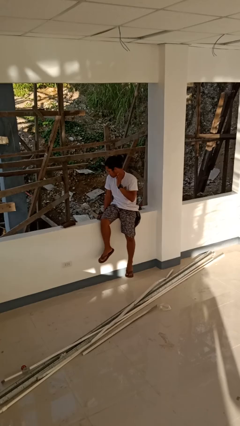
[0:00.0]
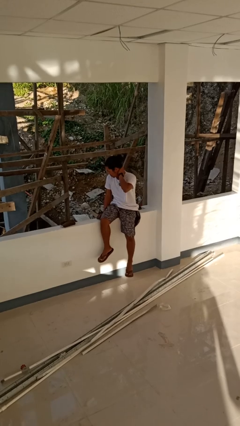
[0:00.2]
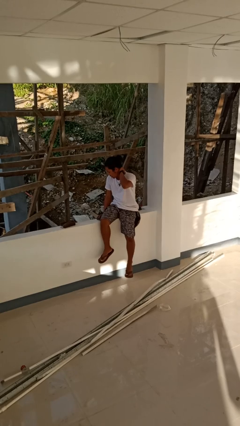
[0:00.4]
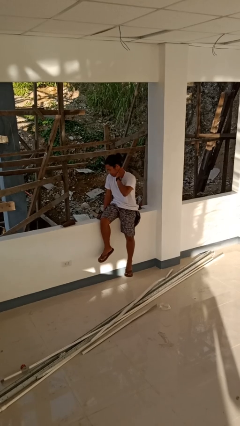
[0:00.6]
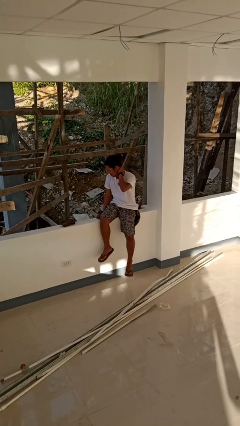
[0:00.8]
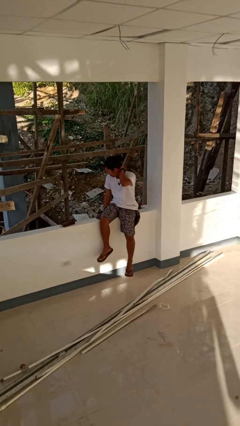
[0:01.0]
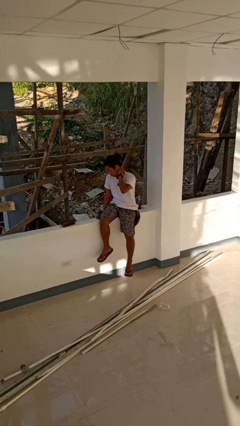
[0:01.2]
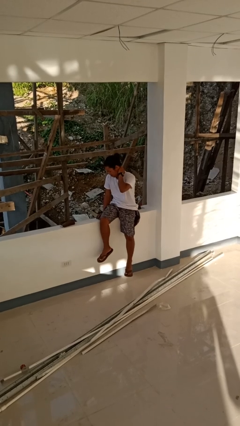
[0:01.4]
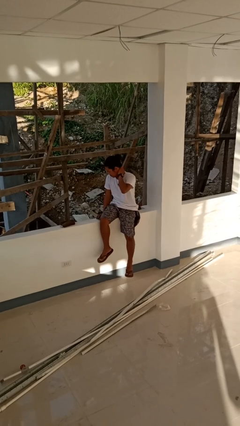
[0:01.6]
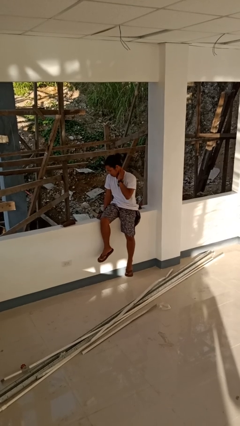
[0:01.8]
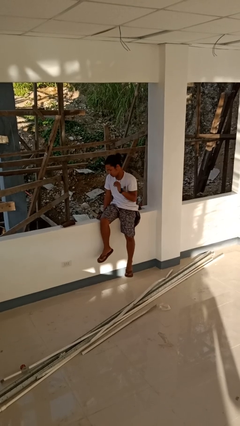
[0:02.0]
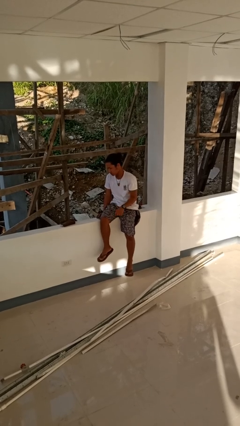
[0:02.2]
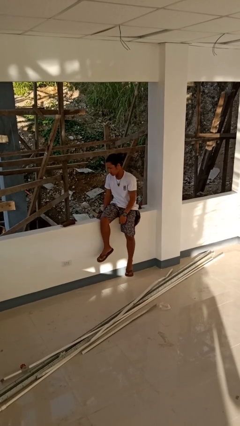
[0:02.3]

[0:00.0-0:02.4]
person rubs neck

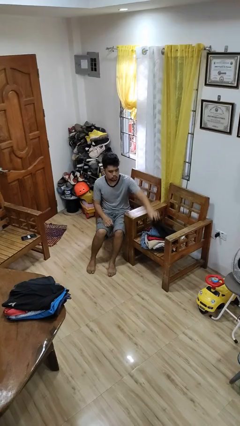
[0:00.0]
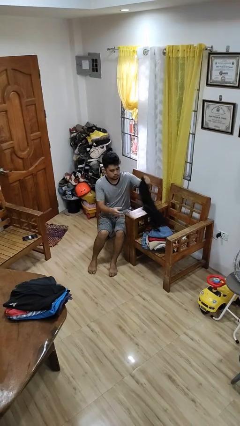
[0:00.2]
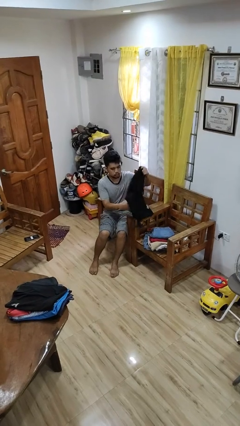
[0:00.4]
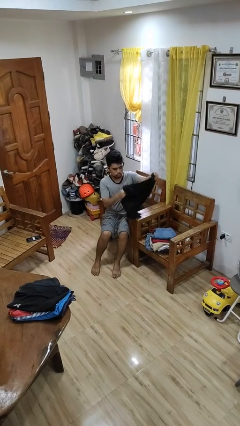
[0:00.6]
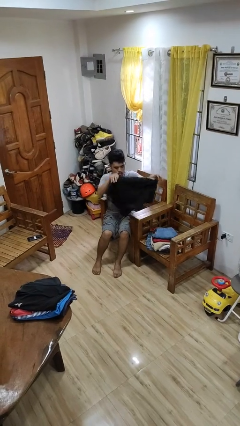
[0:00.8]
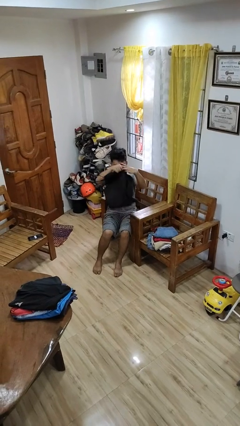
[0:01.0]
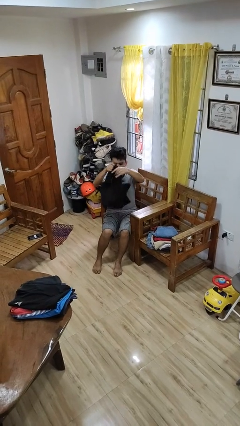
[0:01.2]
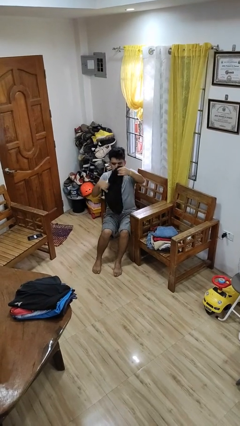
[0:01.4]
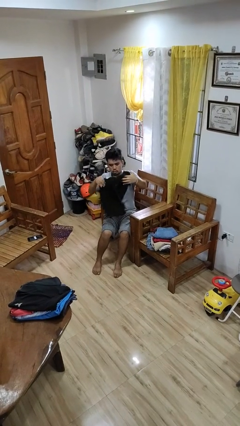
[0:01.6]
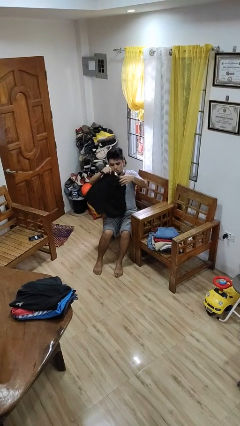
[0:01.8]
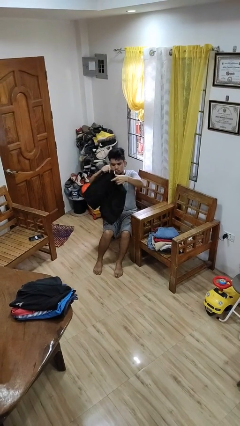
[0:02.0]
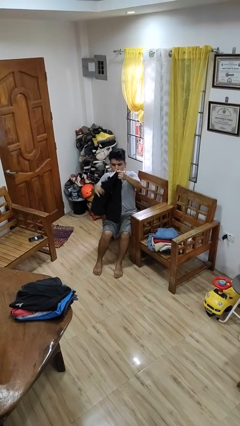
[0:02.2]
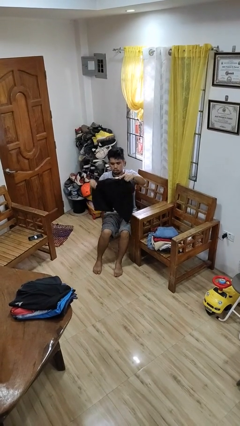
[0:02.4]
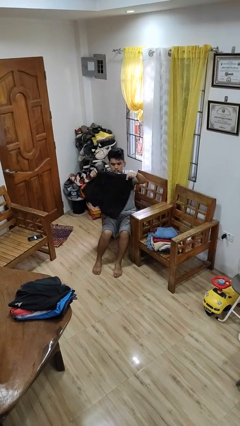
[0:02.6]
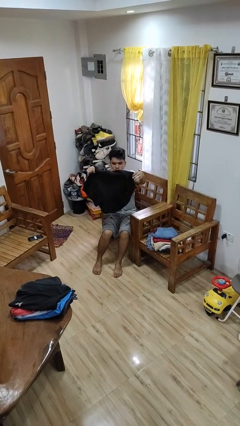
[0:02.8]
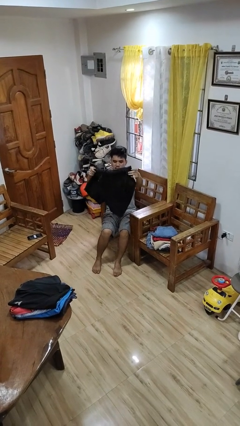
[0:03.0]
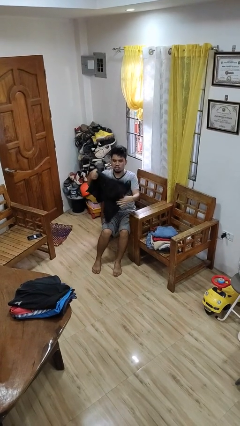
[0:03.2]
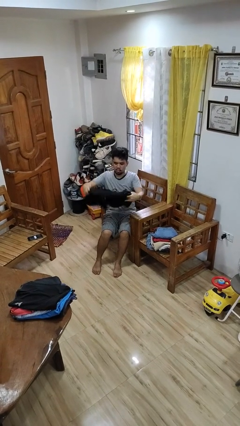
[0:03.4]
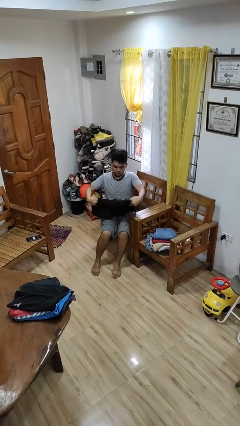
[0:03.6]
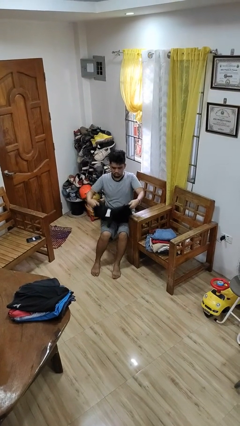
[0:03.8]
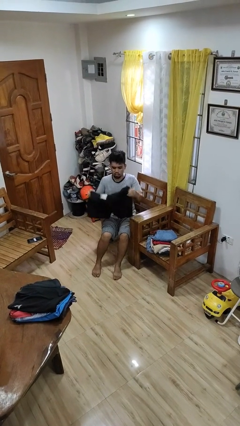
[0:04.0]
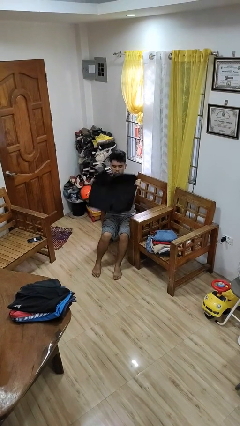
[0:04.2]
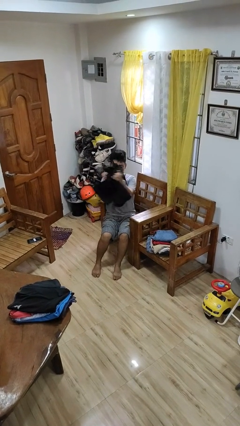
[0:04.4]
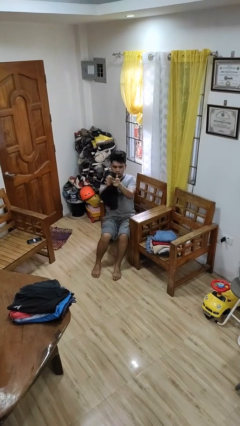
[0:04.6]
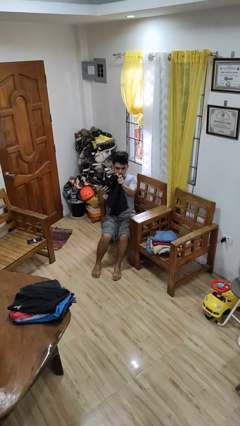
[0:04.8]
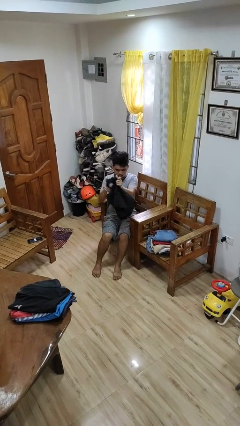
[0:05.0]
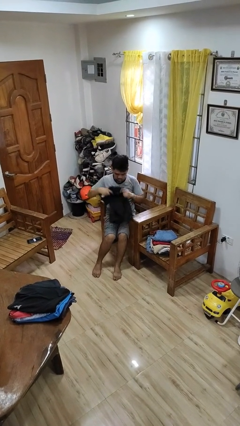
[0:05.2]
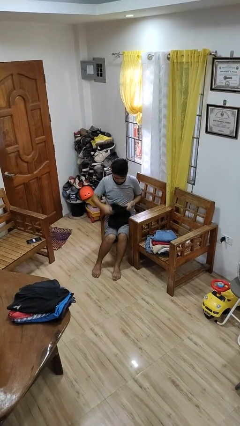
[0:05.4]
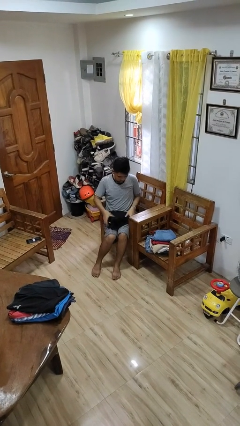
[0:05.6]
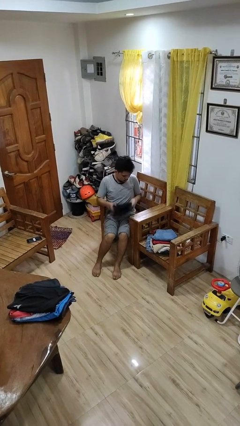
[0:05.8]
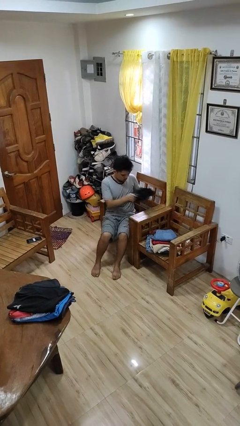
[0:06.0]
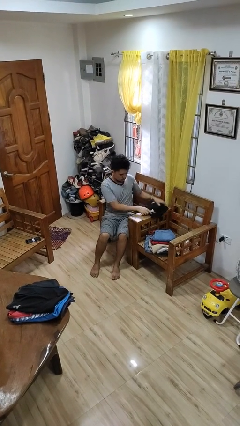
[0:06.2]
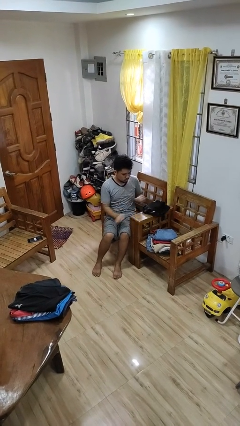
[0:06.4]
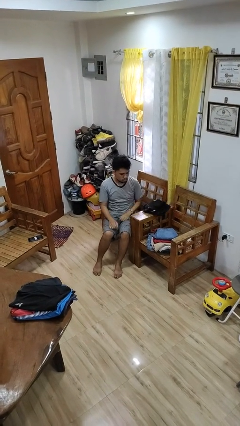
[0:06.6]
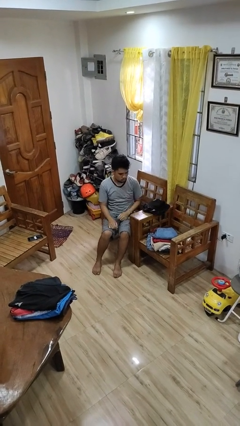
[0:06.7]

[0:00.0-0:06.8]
person folds pants

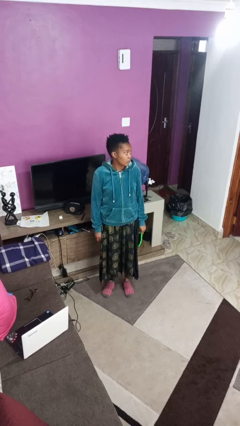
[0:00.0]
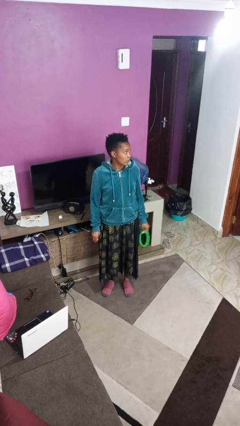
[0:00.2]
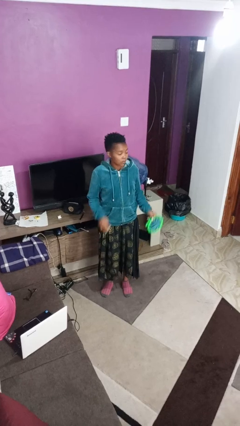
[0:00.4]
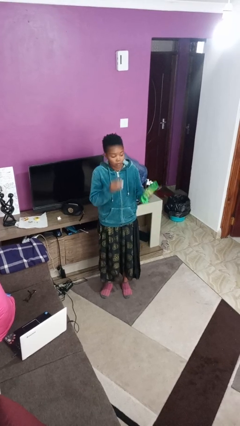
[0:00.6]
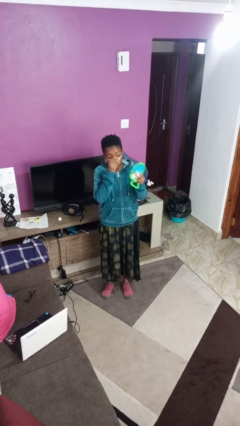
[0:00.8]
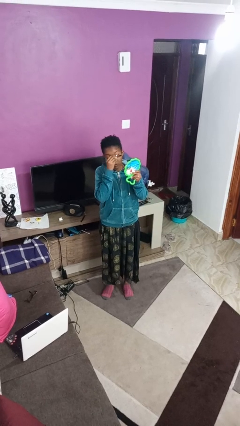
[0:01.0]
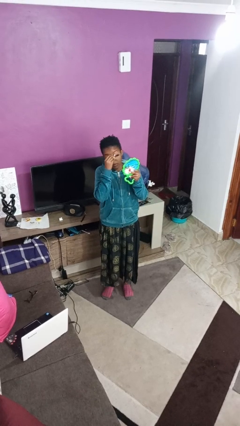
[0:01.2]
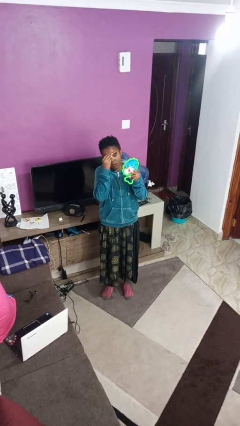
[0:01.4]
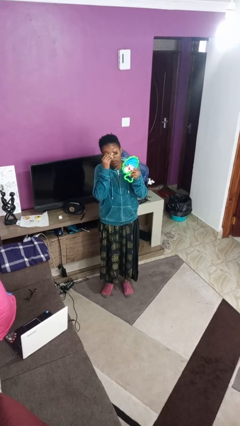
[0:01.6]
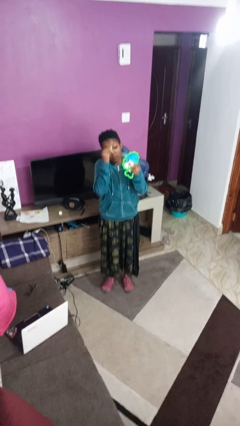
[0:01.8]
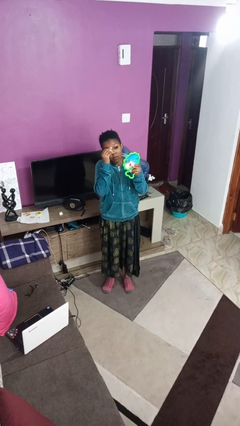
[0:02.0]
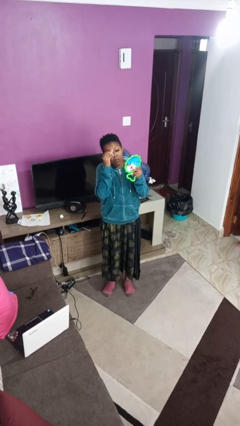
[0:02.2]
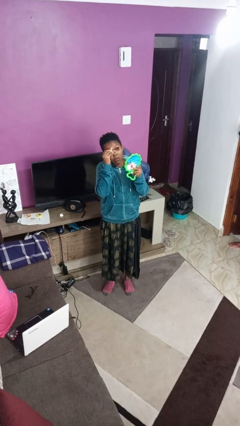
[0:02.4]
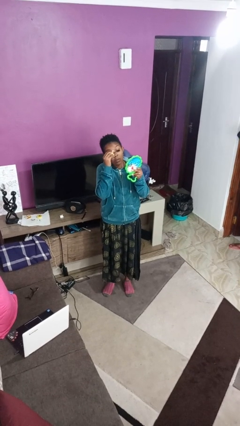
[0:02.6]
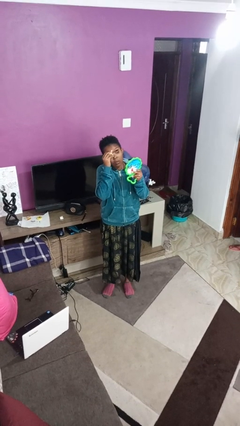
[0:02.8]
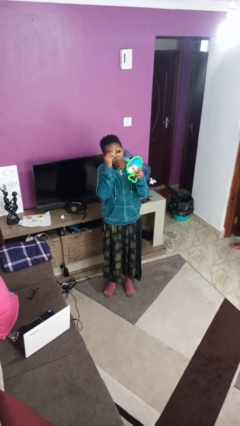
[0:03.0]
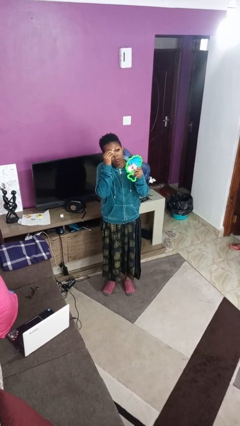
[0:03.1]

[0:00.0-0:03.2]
person applies eye makeup

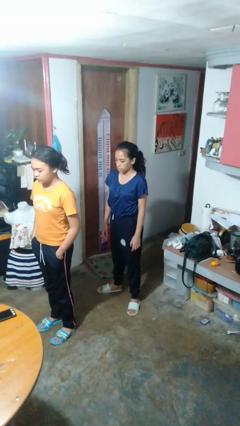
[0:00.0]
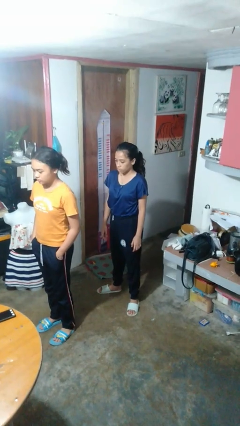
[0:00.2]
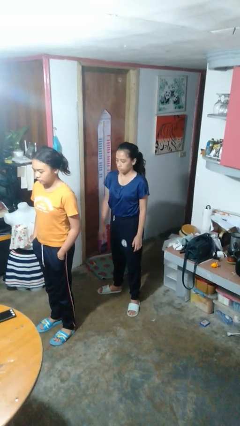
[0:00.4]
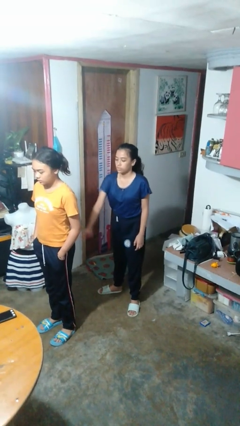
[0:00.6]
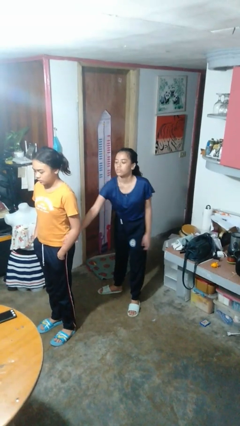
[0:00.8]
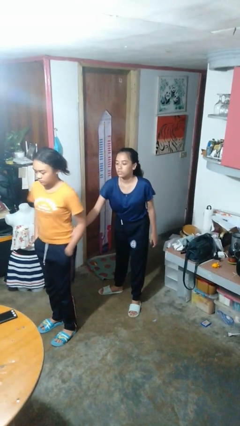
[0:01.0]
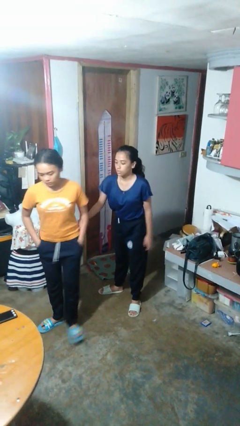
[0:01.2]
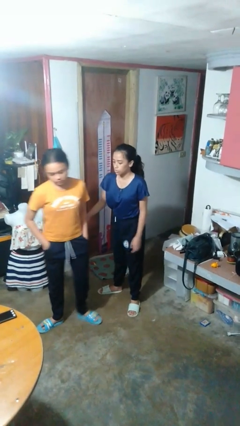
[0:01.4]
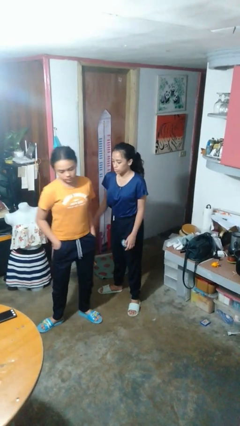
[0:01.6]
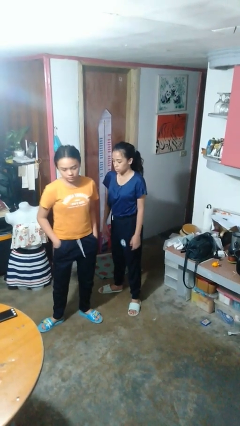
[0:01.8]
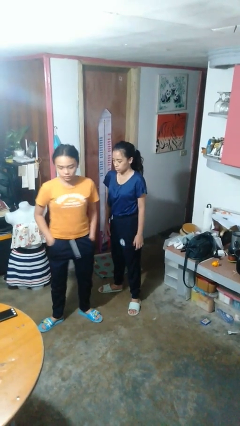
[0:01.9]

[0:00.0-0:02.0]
person grabs person by forearm

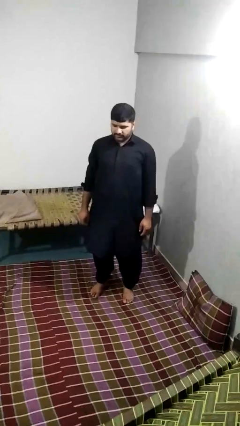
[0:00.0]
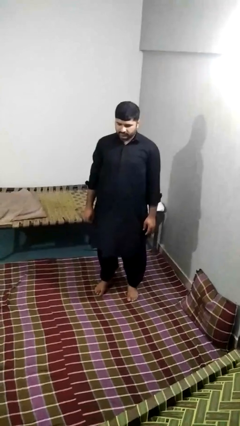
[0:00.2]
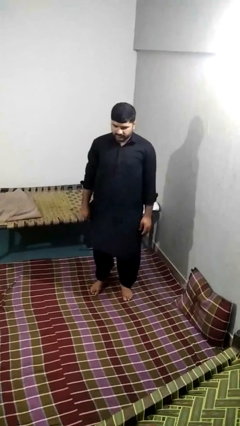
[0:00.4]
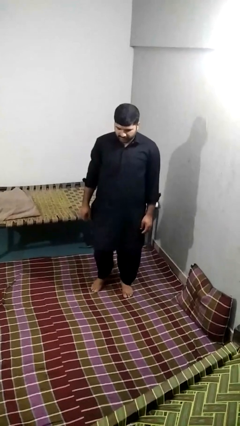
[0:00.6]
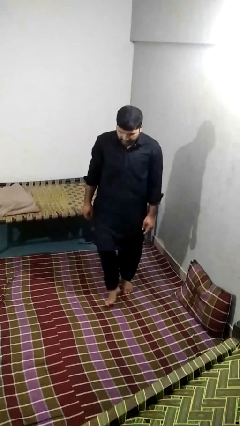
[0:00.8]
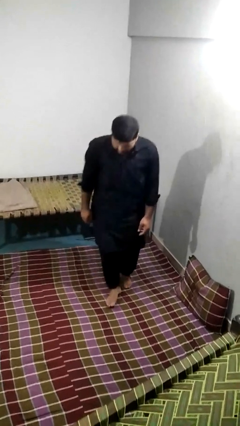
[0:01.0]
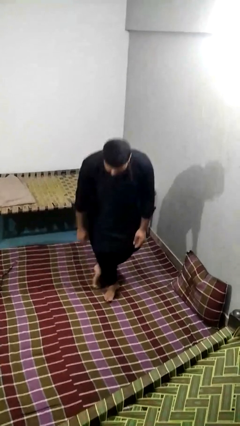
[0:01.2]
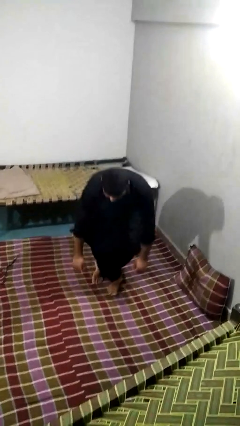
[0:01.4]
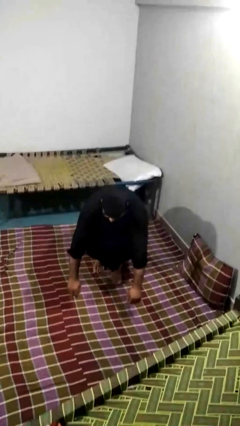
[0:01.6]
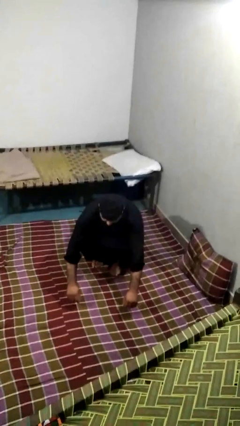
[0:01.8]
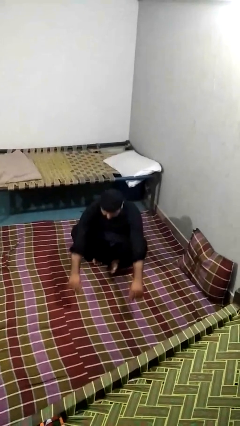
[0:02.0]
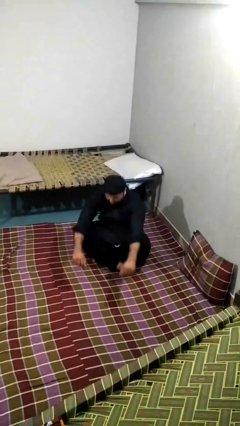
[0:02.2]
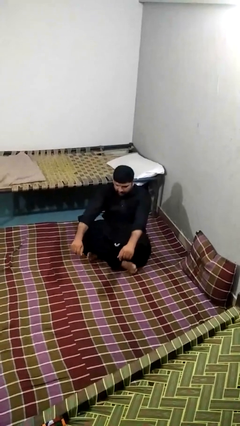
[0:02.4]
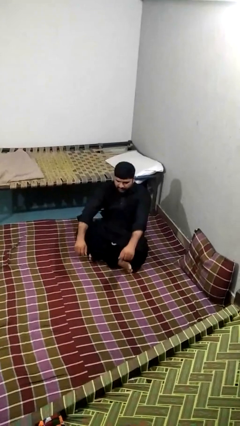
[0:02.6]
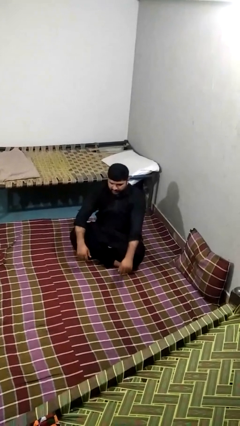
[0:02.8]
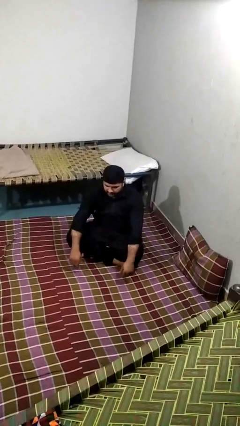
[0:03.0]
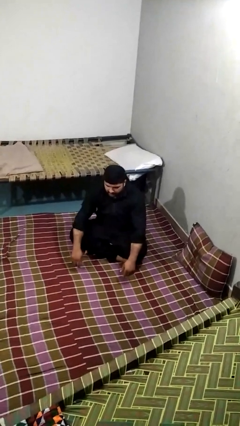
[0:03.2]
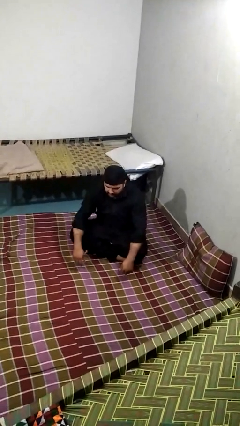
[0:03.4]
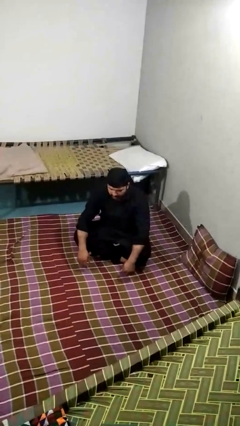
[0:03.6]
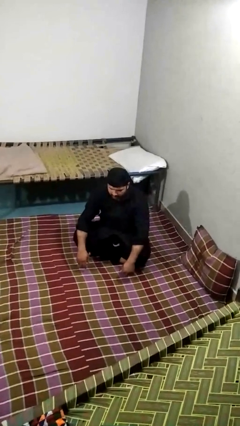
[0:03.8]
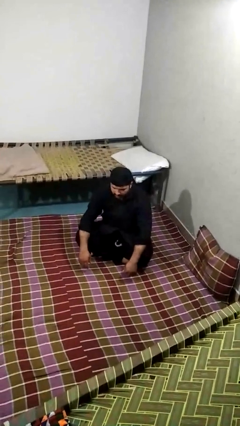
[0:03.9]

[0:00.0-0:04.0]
person sits crisscross
